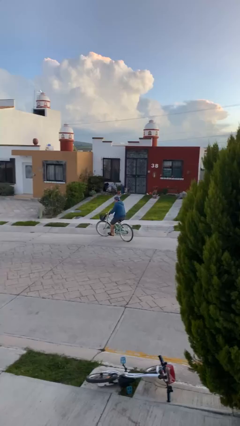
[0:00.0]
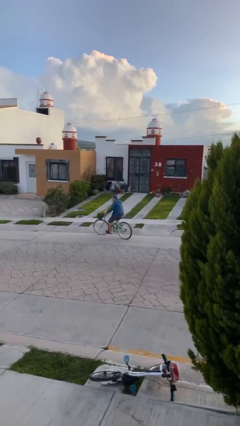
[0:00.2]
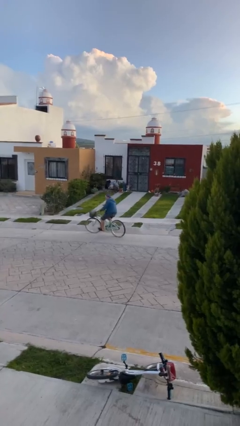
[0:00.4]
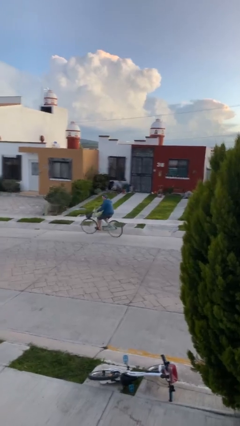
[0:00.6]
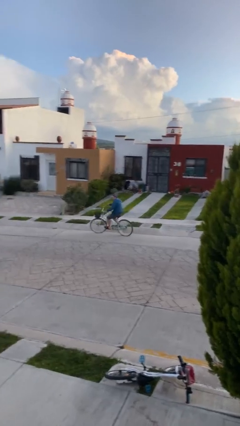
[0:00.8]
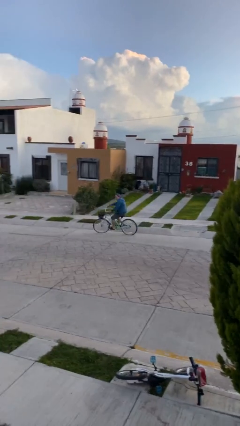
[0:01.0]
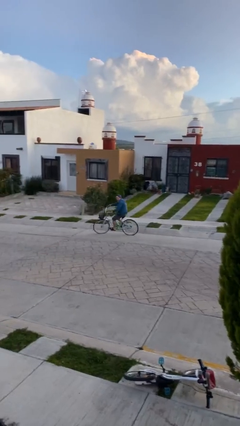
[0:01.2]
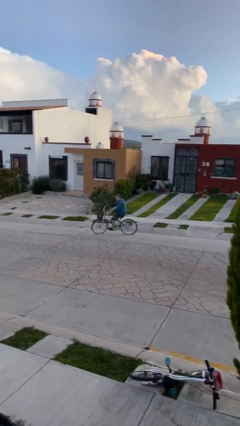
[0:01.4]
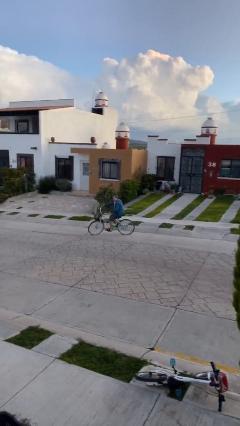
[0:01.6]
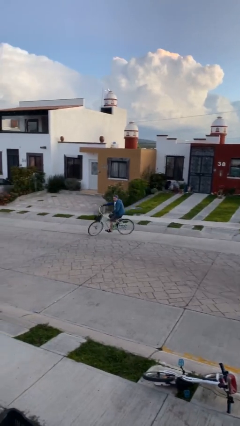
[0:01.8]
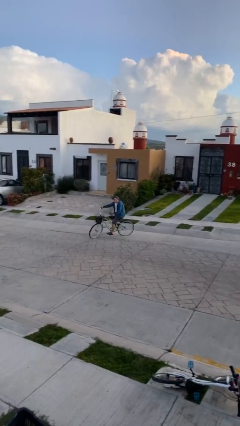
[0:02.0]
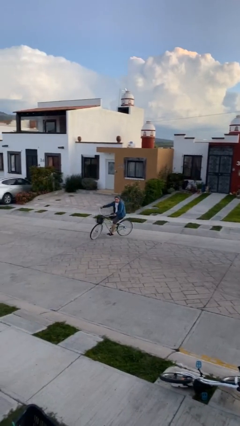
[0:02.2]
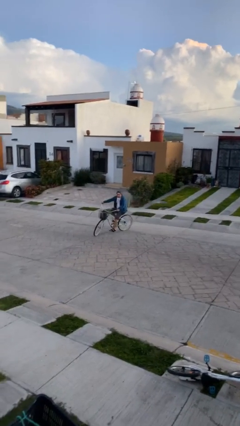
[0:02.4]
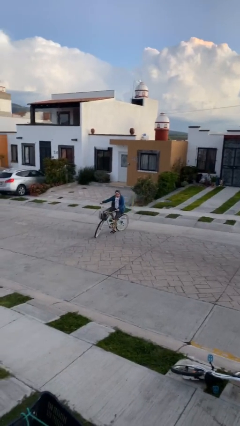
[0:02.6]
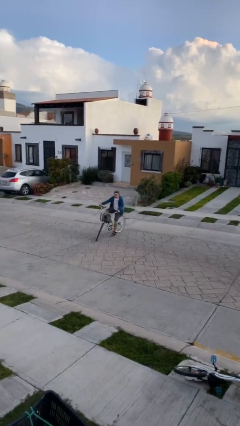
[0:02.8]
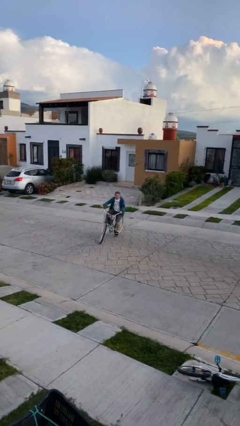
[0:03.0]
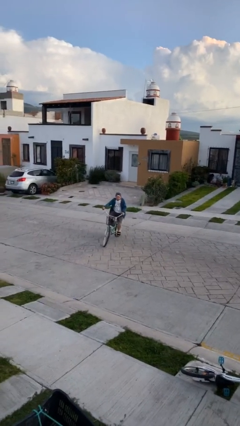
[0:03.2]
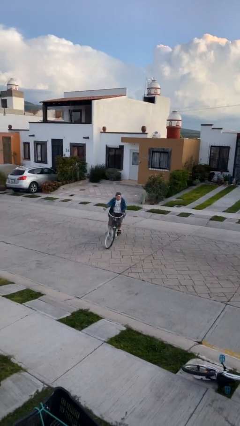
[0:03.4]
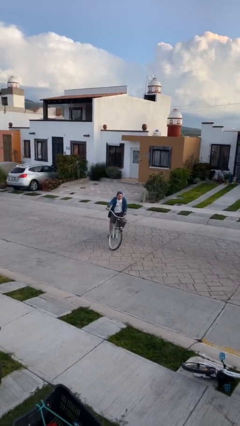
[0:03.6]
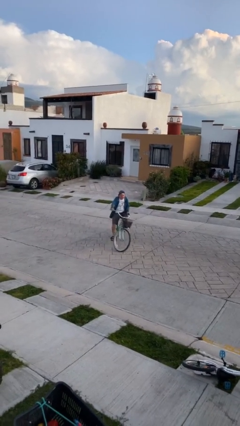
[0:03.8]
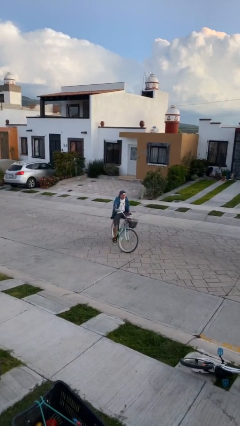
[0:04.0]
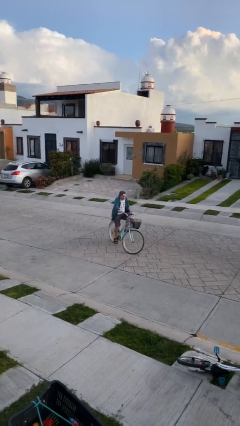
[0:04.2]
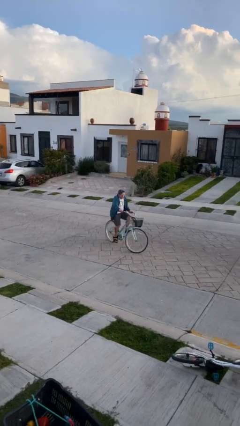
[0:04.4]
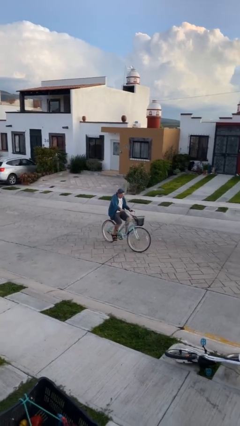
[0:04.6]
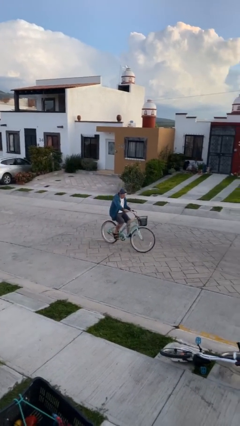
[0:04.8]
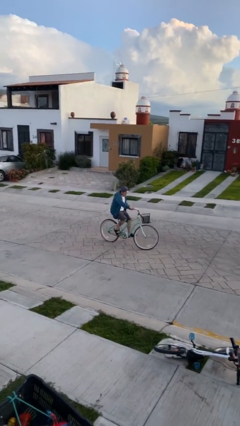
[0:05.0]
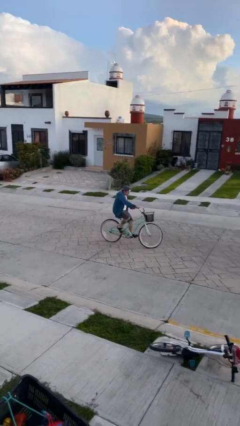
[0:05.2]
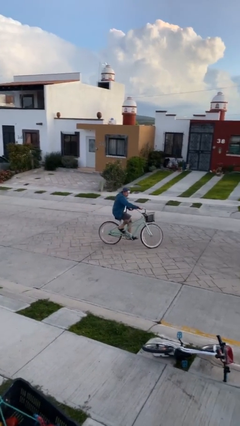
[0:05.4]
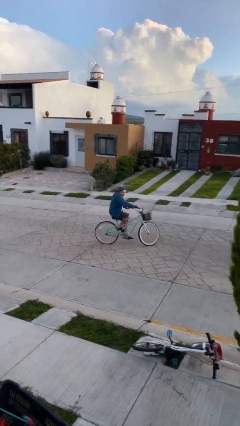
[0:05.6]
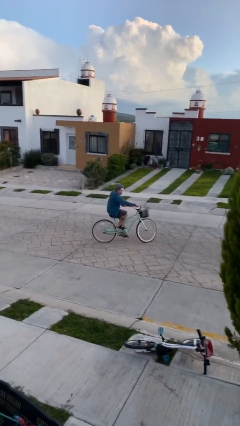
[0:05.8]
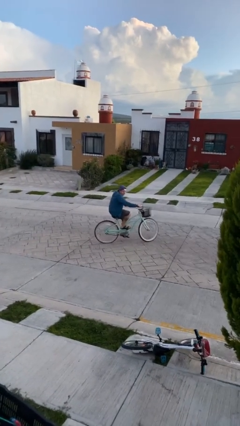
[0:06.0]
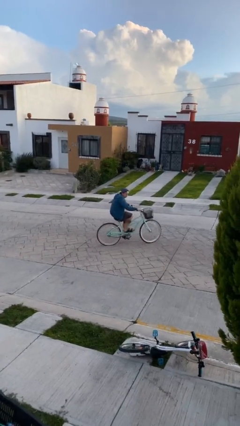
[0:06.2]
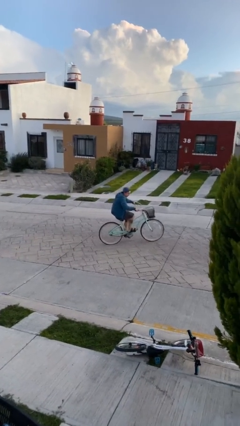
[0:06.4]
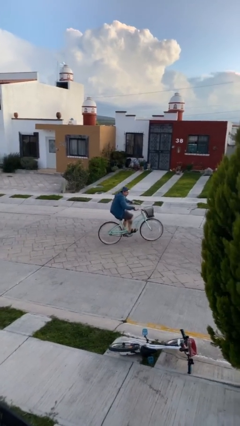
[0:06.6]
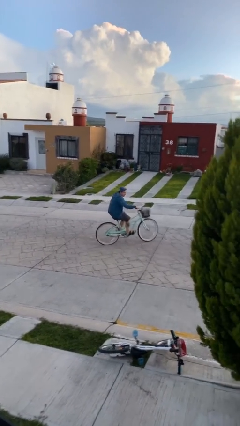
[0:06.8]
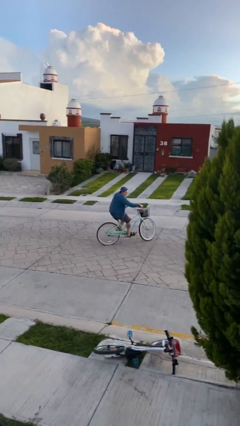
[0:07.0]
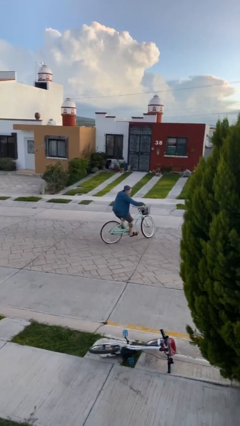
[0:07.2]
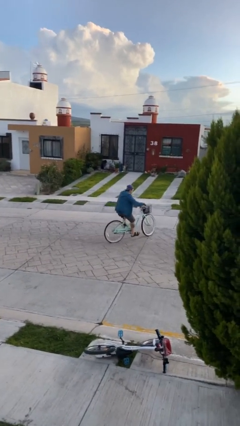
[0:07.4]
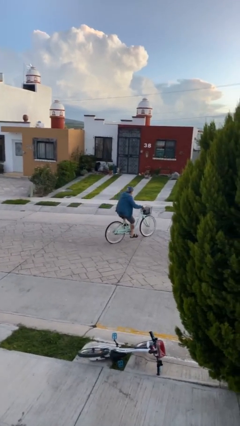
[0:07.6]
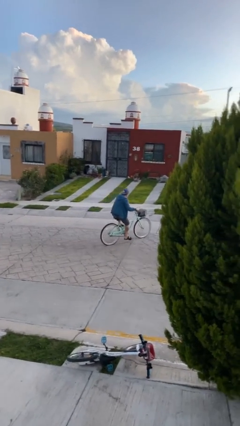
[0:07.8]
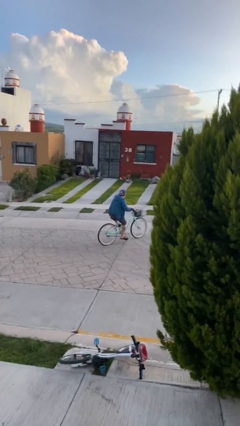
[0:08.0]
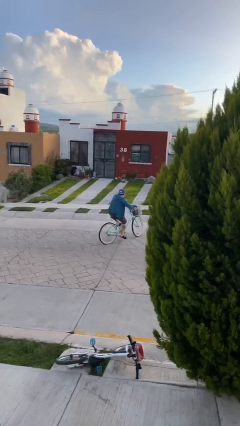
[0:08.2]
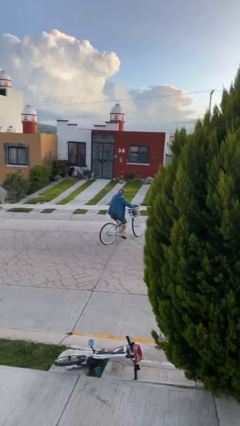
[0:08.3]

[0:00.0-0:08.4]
person rides bicycle

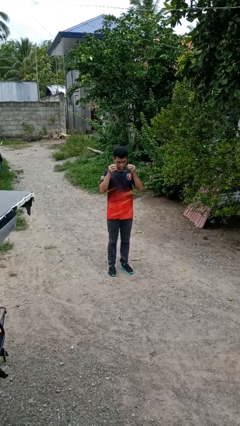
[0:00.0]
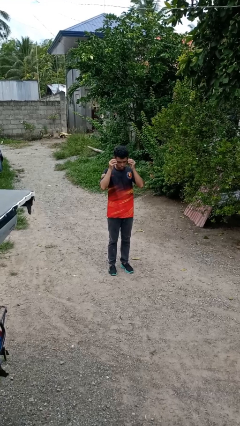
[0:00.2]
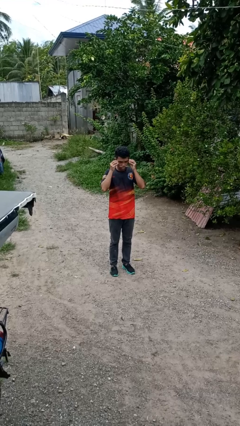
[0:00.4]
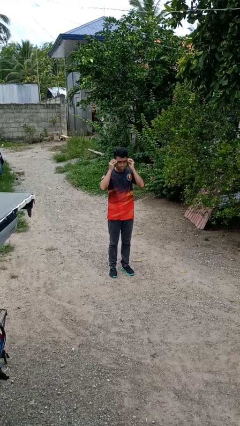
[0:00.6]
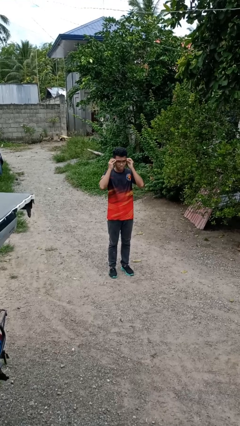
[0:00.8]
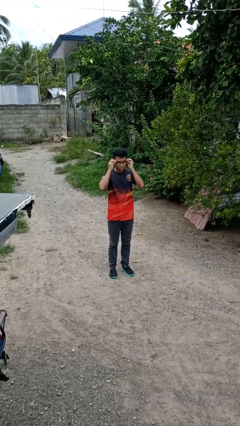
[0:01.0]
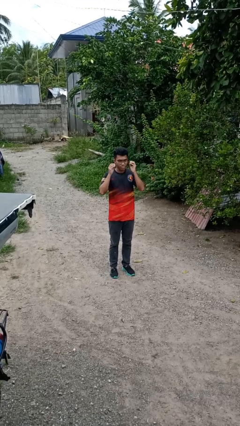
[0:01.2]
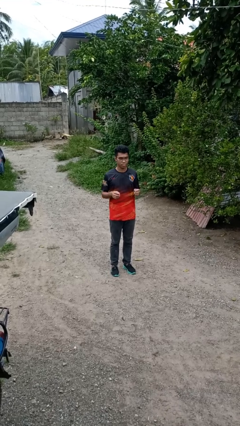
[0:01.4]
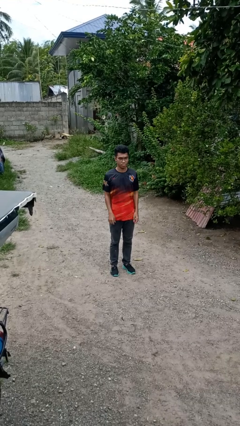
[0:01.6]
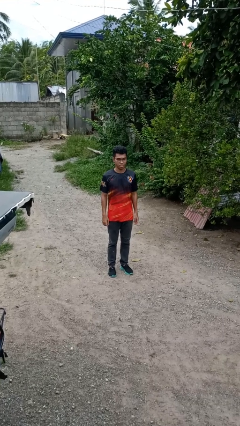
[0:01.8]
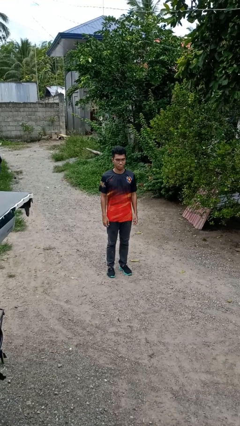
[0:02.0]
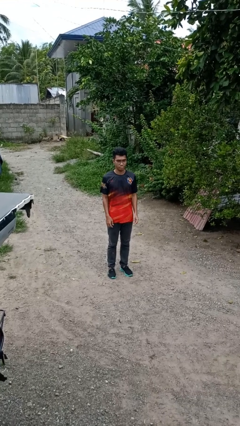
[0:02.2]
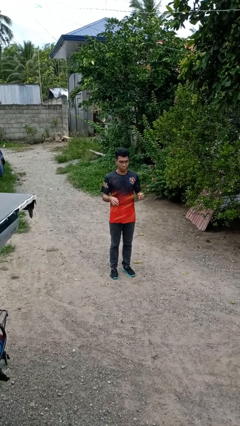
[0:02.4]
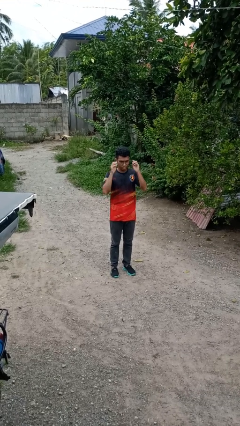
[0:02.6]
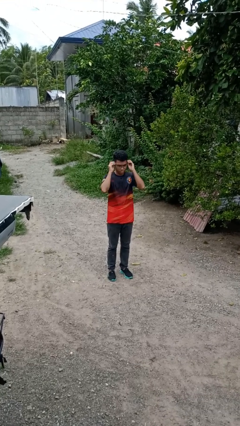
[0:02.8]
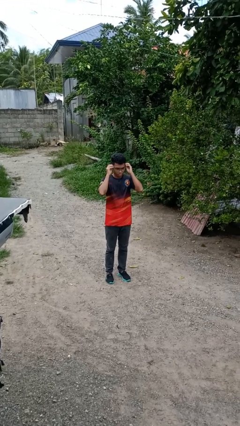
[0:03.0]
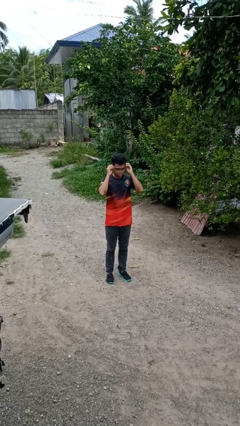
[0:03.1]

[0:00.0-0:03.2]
person puts on glasses

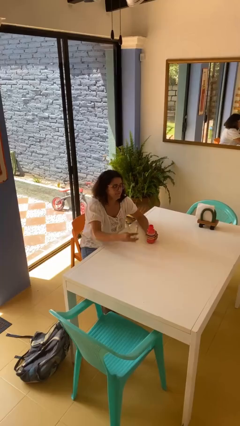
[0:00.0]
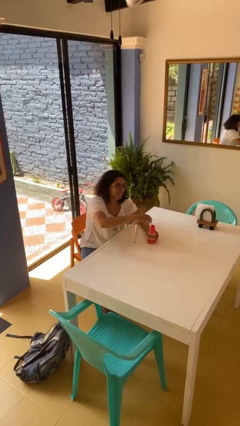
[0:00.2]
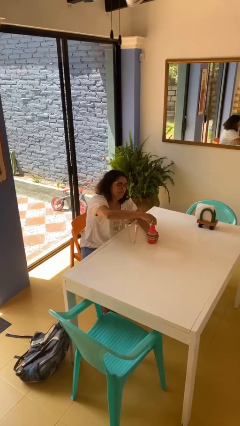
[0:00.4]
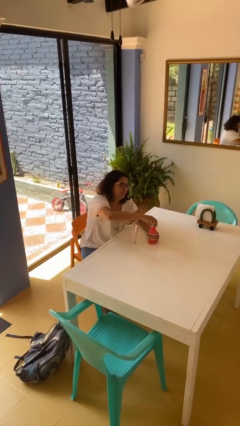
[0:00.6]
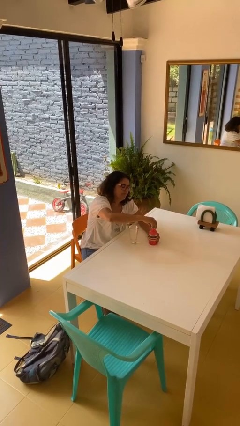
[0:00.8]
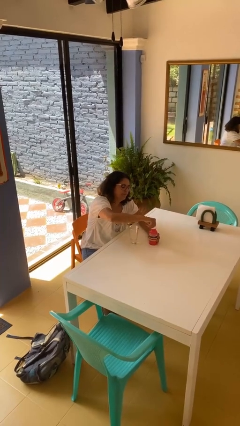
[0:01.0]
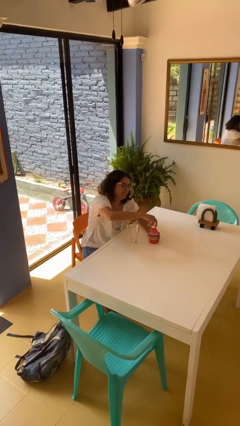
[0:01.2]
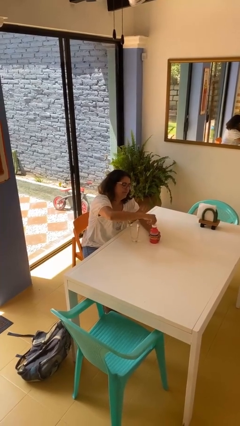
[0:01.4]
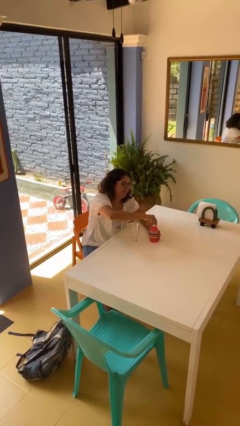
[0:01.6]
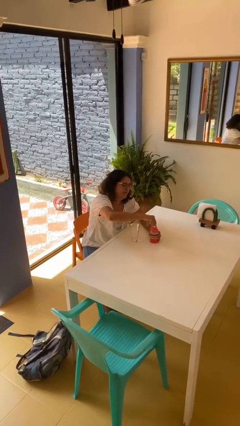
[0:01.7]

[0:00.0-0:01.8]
person screws lid to bottle

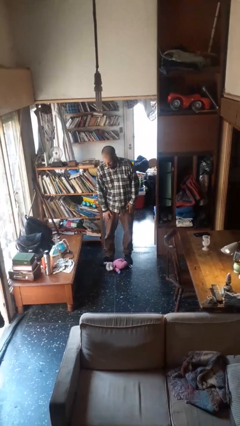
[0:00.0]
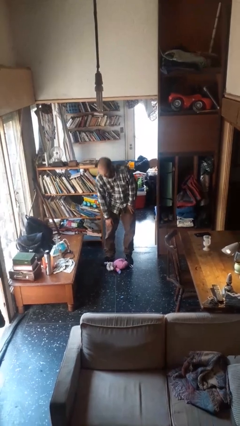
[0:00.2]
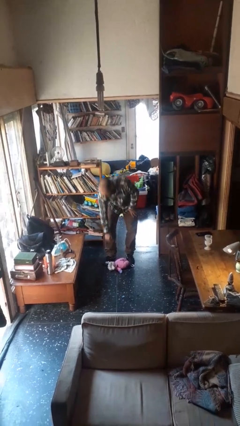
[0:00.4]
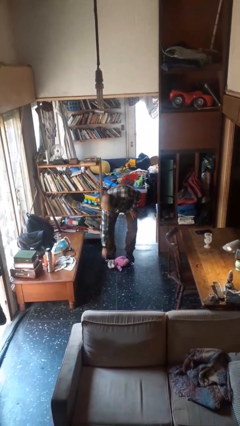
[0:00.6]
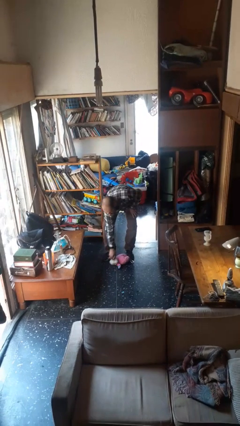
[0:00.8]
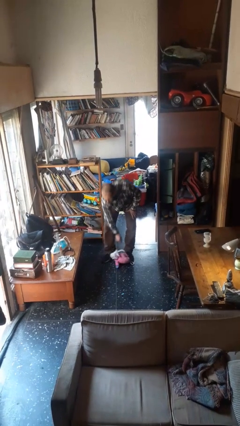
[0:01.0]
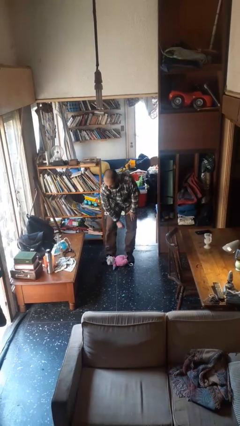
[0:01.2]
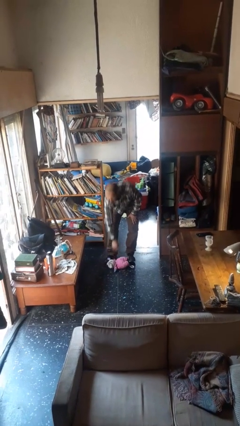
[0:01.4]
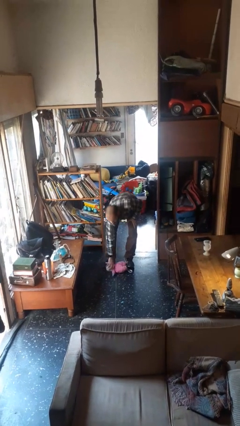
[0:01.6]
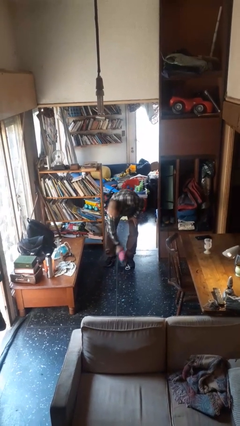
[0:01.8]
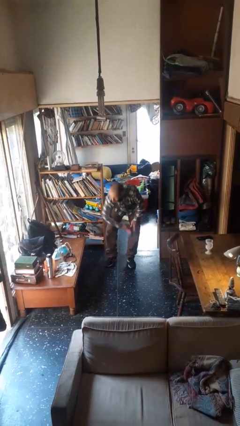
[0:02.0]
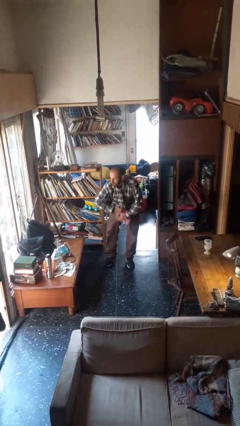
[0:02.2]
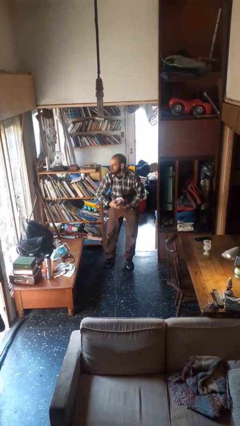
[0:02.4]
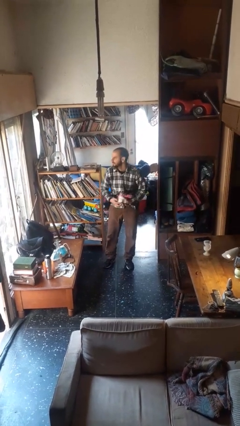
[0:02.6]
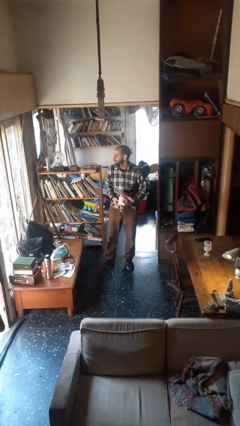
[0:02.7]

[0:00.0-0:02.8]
person picks up object from floor

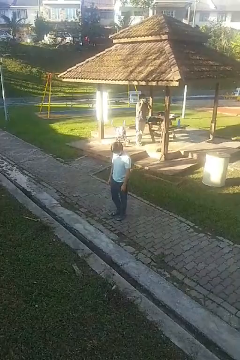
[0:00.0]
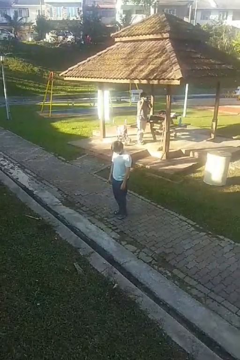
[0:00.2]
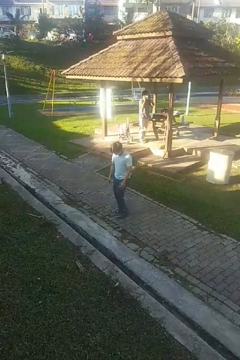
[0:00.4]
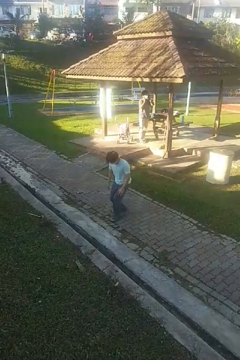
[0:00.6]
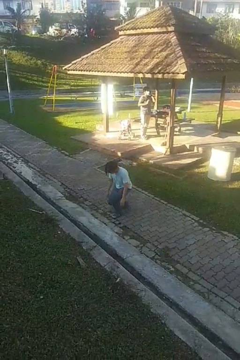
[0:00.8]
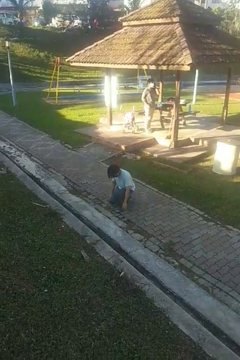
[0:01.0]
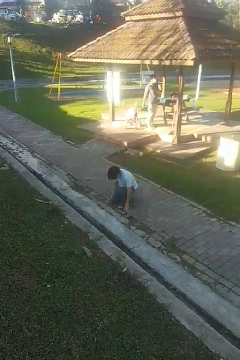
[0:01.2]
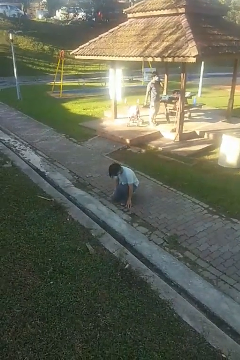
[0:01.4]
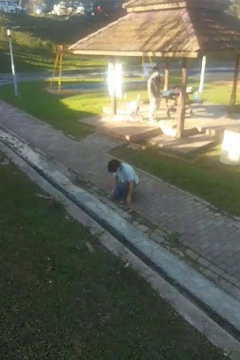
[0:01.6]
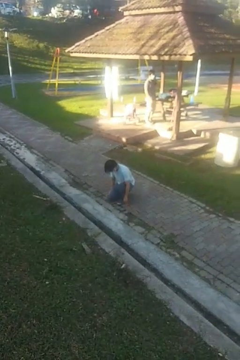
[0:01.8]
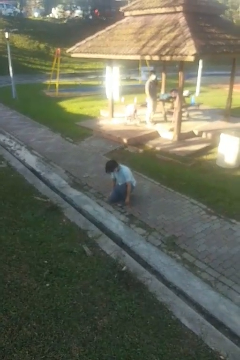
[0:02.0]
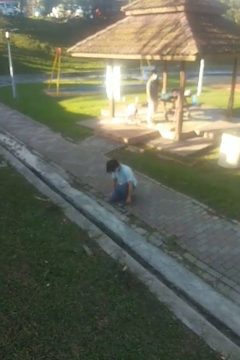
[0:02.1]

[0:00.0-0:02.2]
person kneels
